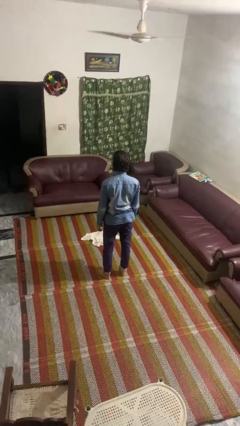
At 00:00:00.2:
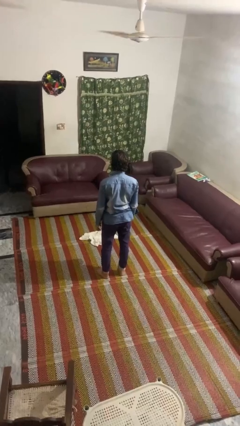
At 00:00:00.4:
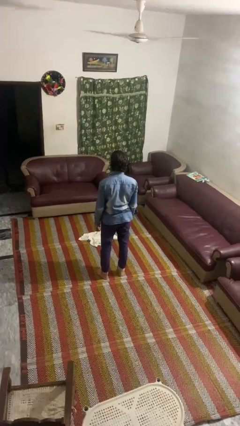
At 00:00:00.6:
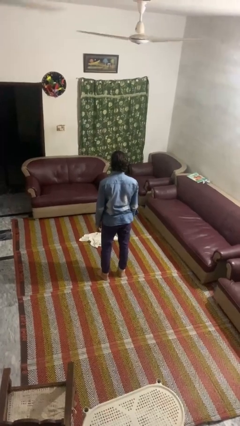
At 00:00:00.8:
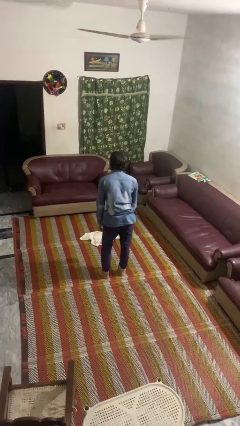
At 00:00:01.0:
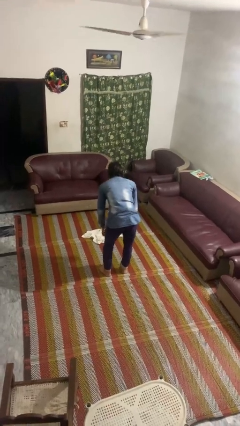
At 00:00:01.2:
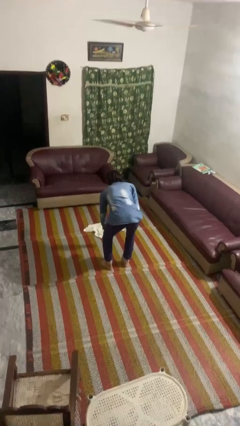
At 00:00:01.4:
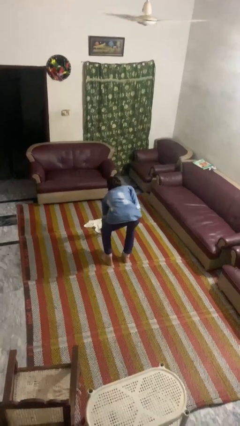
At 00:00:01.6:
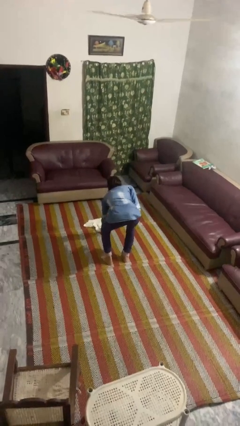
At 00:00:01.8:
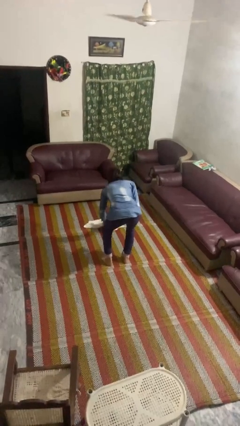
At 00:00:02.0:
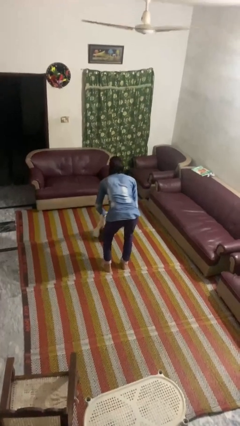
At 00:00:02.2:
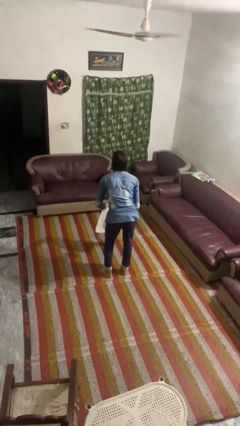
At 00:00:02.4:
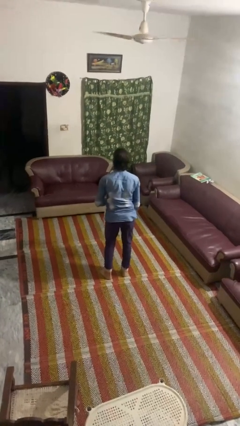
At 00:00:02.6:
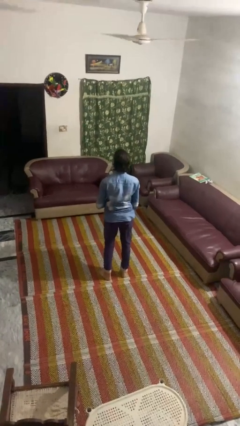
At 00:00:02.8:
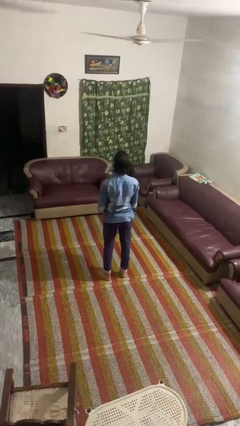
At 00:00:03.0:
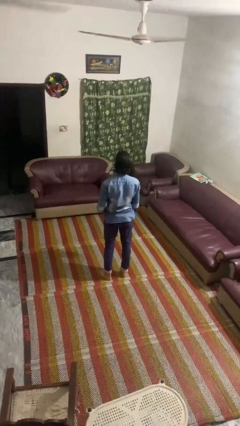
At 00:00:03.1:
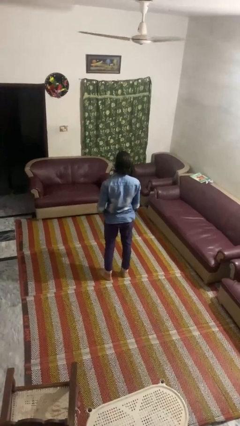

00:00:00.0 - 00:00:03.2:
person picks up object from floor

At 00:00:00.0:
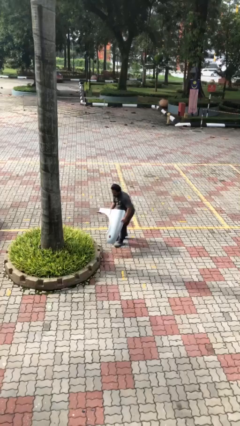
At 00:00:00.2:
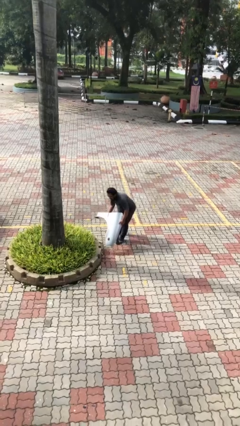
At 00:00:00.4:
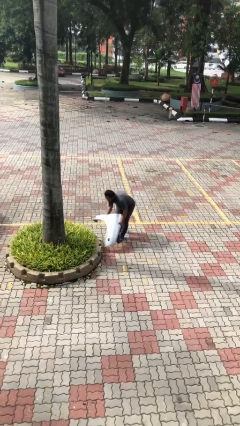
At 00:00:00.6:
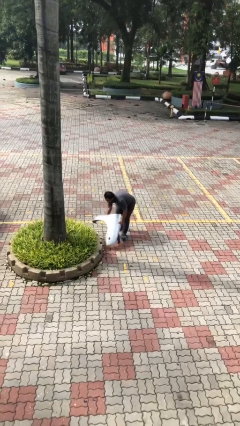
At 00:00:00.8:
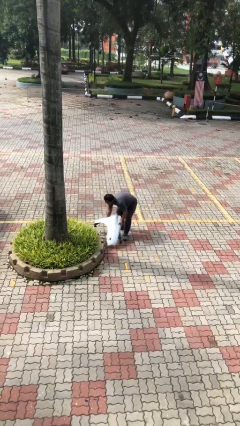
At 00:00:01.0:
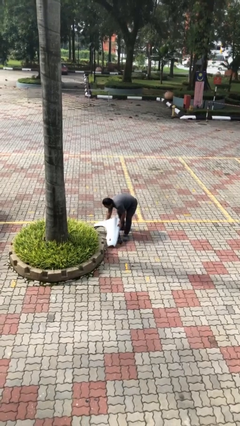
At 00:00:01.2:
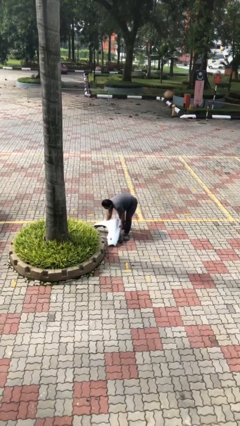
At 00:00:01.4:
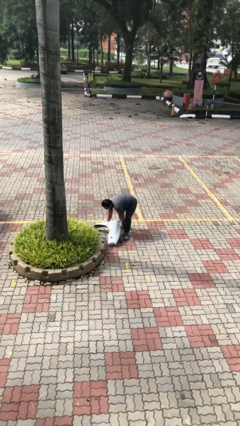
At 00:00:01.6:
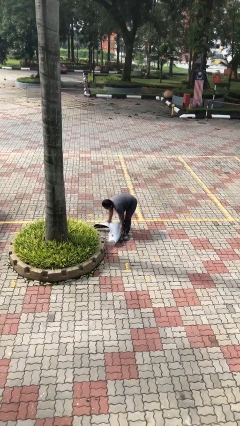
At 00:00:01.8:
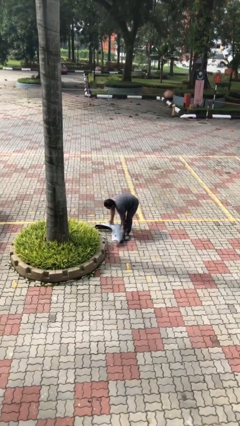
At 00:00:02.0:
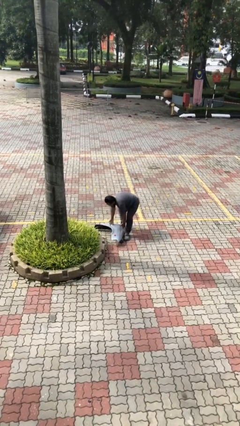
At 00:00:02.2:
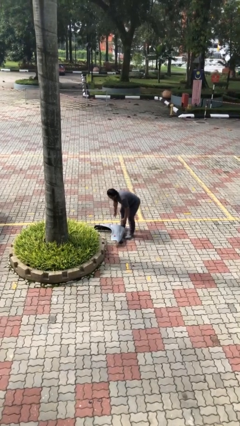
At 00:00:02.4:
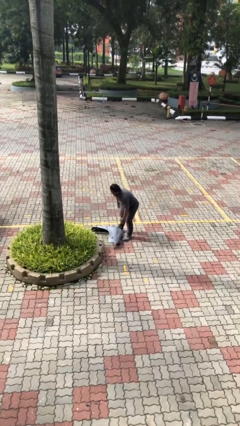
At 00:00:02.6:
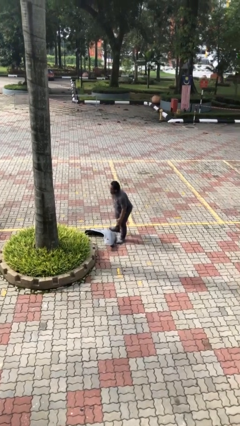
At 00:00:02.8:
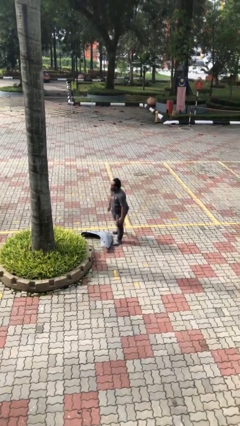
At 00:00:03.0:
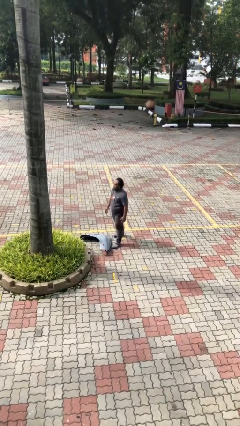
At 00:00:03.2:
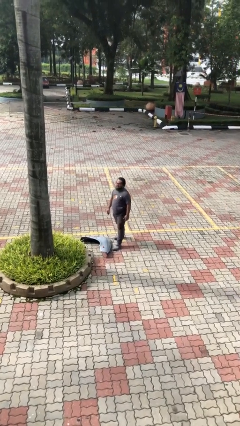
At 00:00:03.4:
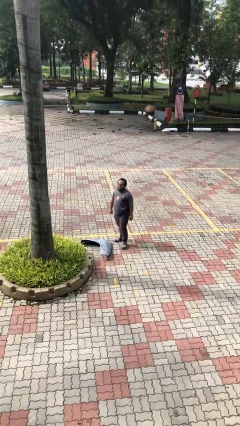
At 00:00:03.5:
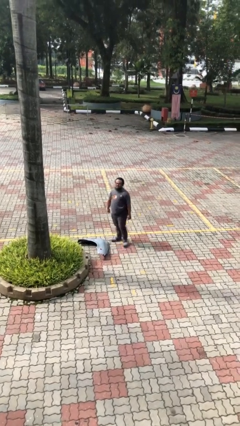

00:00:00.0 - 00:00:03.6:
person puts down object on floor

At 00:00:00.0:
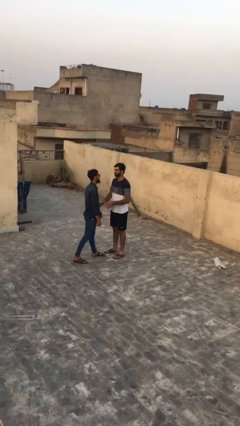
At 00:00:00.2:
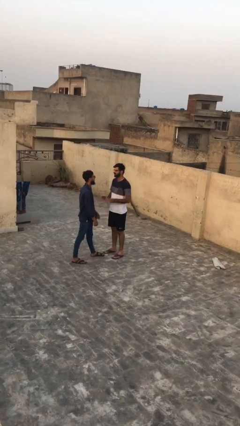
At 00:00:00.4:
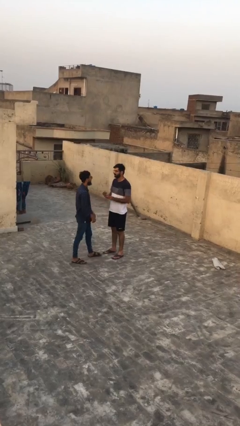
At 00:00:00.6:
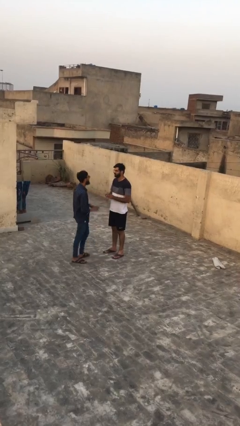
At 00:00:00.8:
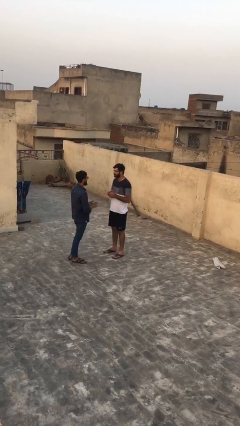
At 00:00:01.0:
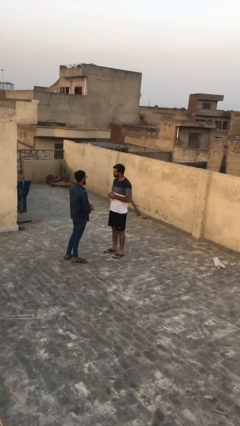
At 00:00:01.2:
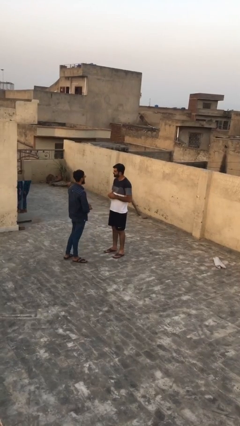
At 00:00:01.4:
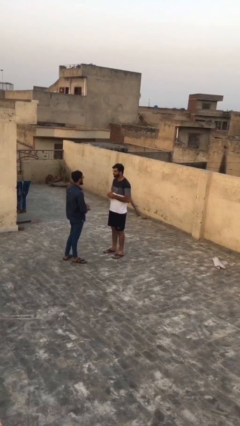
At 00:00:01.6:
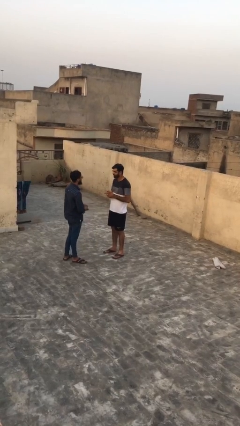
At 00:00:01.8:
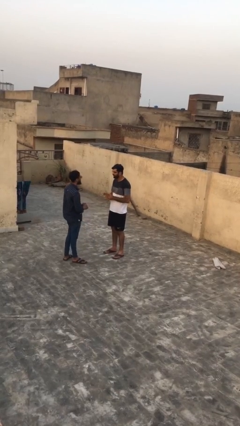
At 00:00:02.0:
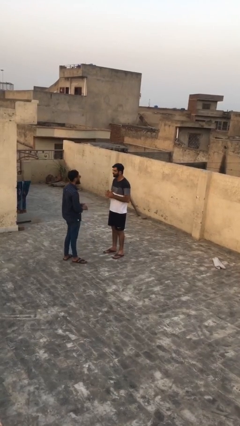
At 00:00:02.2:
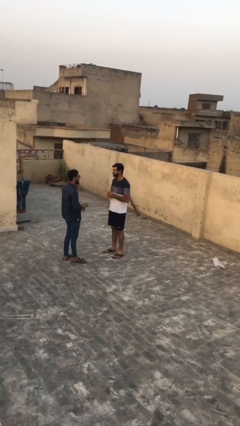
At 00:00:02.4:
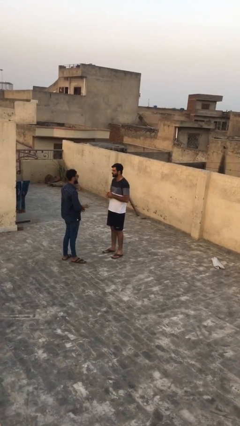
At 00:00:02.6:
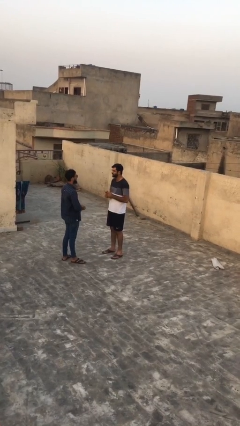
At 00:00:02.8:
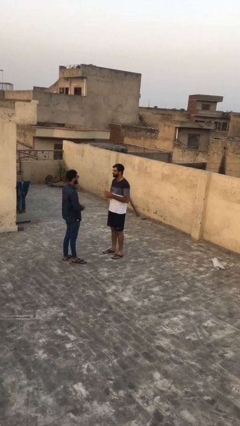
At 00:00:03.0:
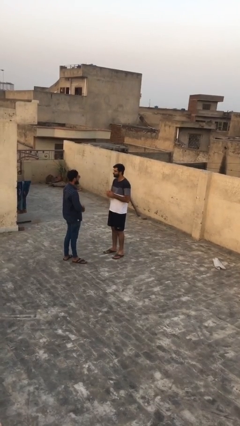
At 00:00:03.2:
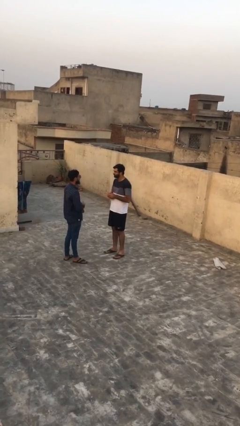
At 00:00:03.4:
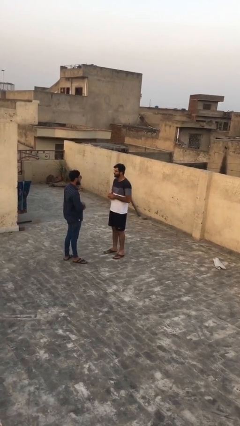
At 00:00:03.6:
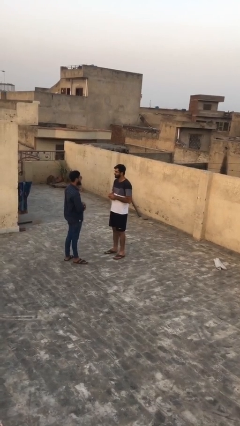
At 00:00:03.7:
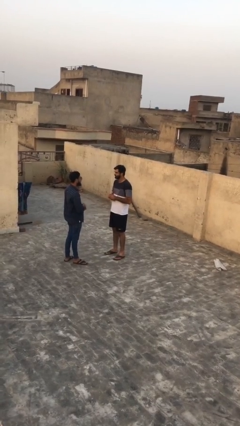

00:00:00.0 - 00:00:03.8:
person talks to person

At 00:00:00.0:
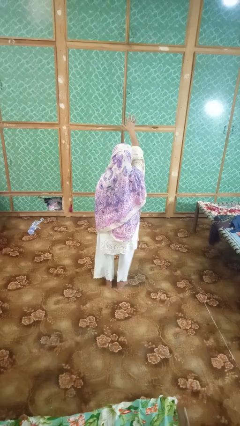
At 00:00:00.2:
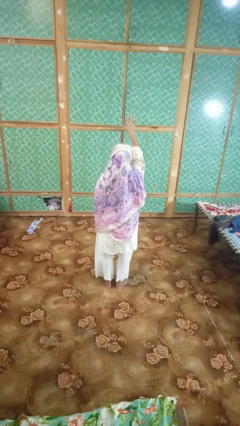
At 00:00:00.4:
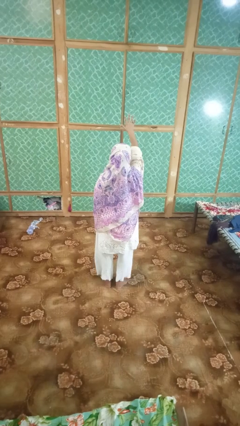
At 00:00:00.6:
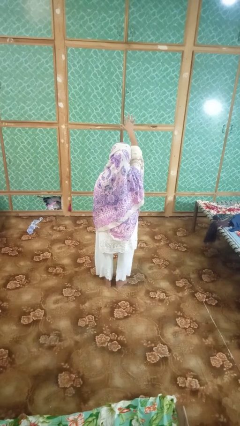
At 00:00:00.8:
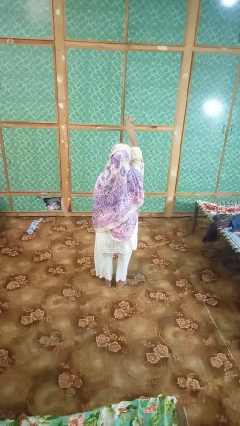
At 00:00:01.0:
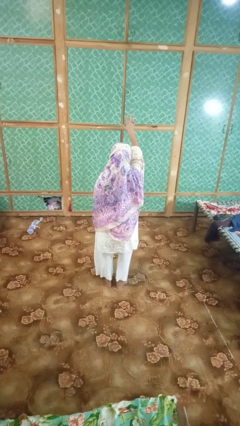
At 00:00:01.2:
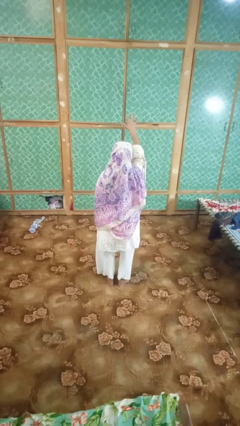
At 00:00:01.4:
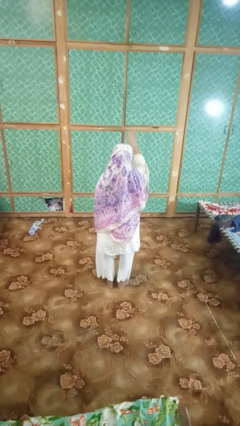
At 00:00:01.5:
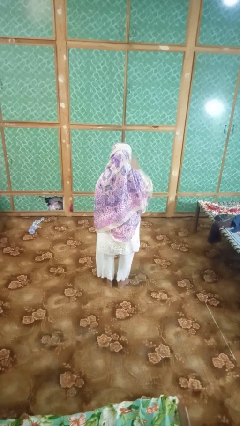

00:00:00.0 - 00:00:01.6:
person gestures number five

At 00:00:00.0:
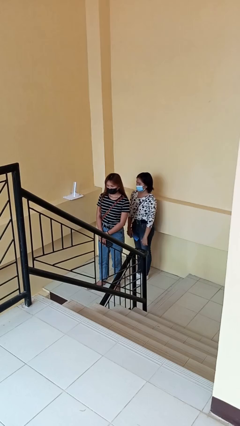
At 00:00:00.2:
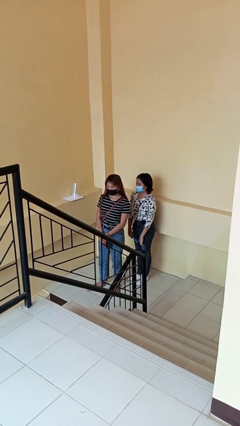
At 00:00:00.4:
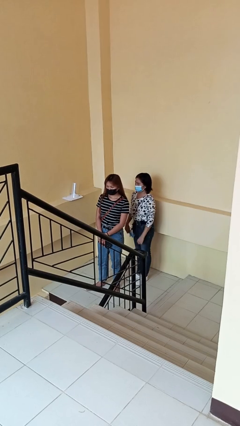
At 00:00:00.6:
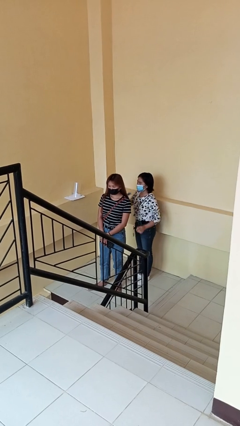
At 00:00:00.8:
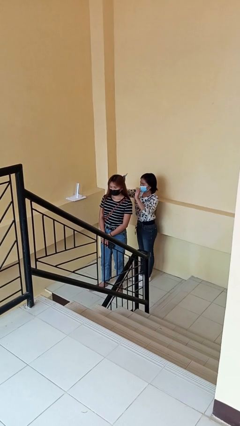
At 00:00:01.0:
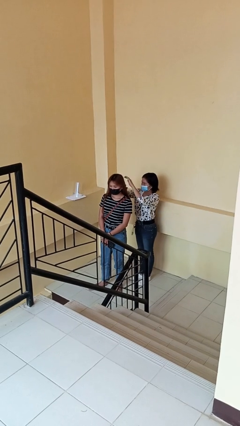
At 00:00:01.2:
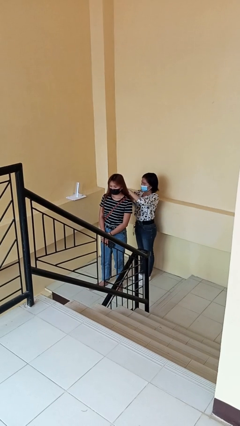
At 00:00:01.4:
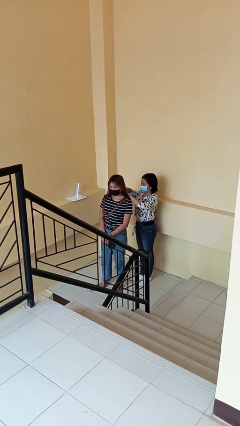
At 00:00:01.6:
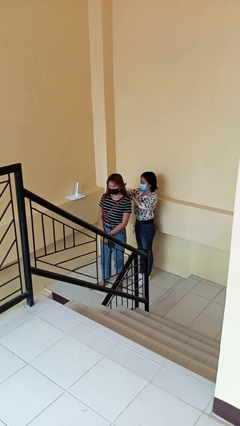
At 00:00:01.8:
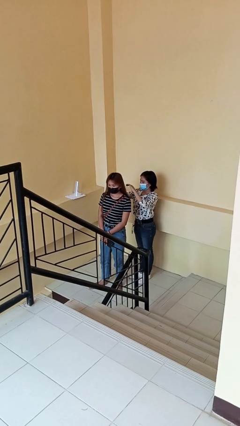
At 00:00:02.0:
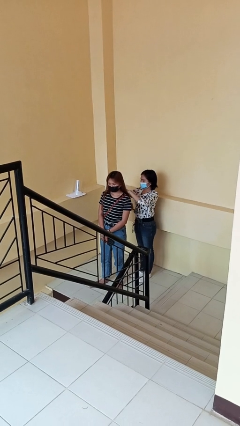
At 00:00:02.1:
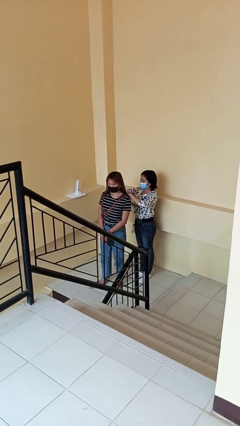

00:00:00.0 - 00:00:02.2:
person brushes hair of person

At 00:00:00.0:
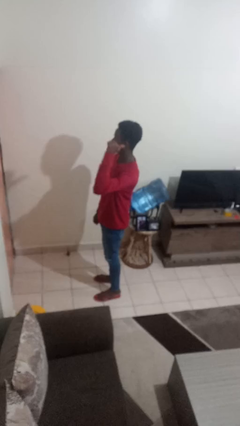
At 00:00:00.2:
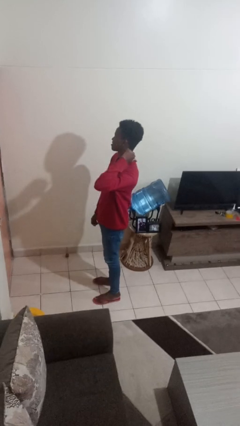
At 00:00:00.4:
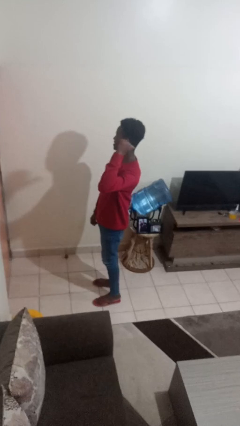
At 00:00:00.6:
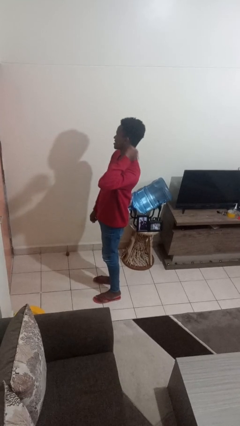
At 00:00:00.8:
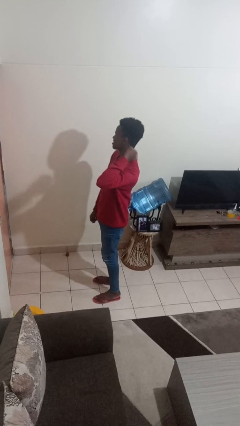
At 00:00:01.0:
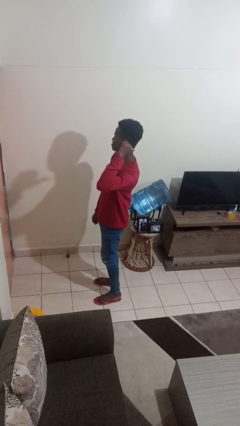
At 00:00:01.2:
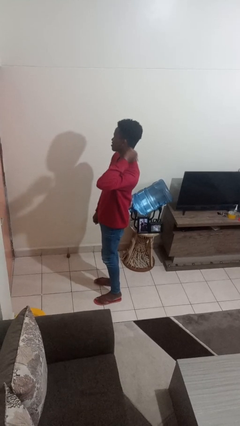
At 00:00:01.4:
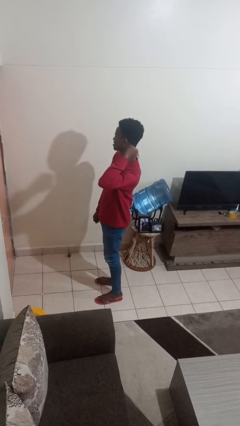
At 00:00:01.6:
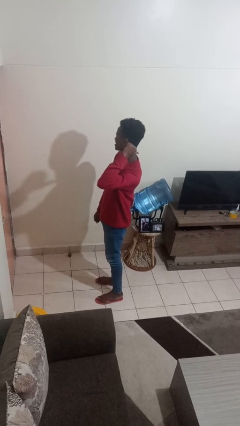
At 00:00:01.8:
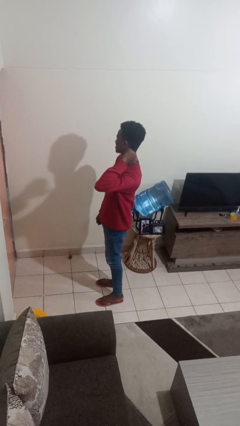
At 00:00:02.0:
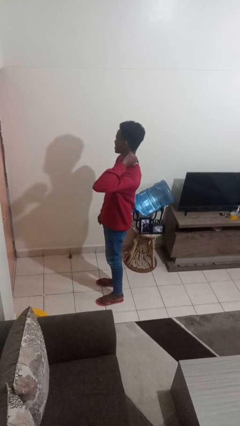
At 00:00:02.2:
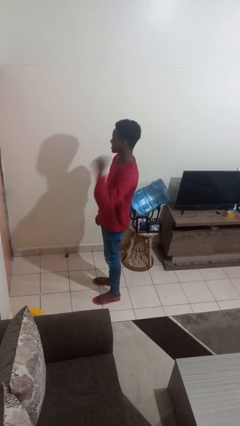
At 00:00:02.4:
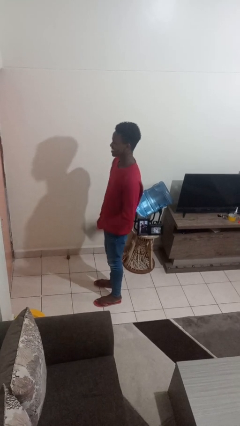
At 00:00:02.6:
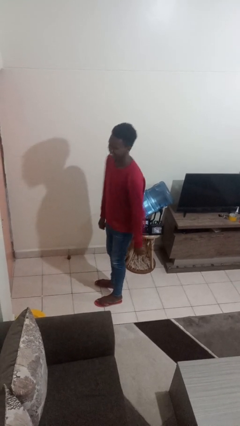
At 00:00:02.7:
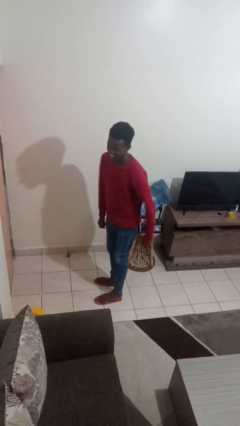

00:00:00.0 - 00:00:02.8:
person gestures behind me
